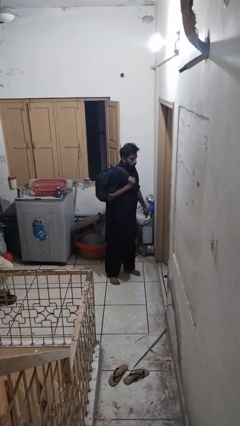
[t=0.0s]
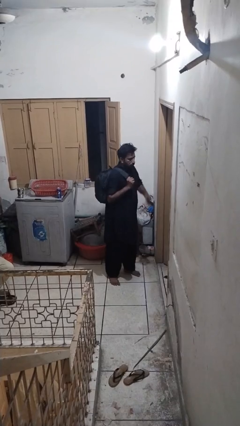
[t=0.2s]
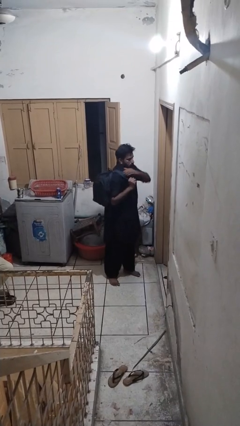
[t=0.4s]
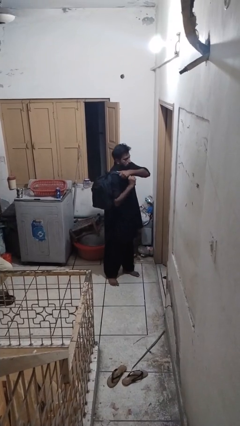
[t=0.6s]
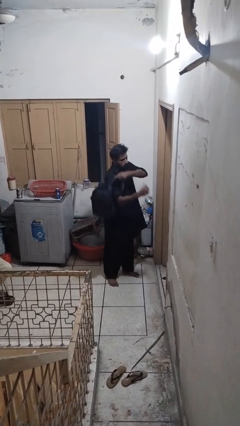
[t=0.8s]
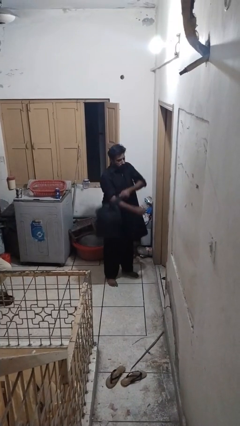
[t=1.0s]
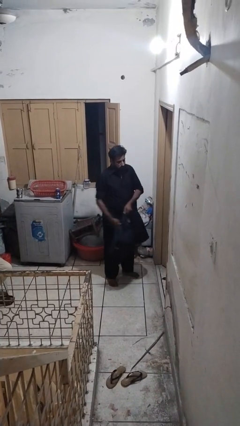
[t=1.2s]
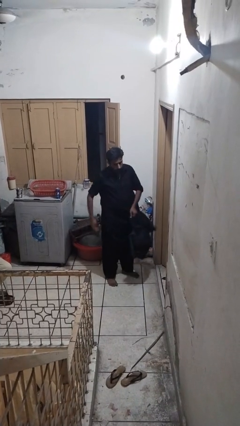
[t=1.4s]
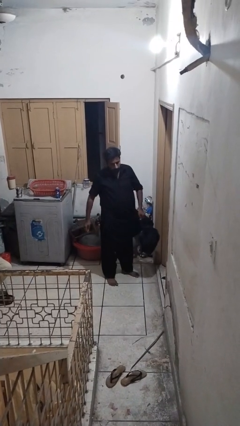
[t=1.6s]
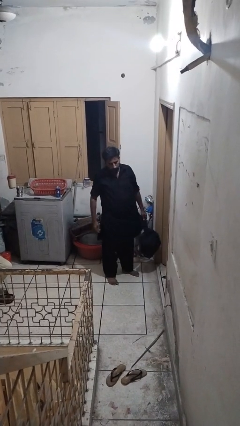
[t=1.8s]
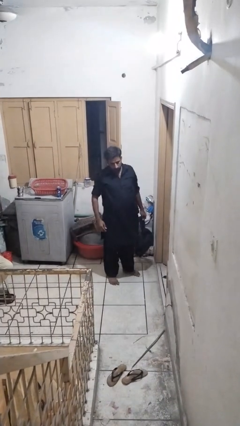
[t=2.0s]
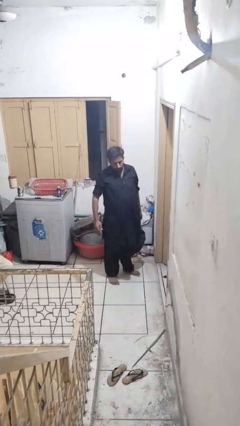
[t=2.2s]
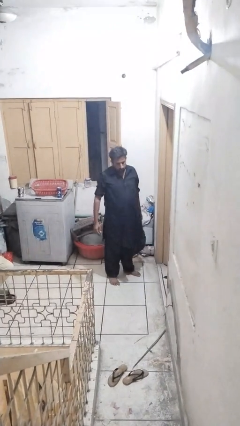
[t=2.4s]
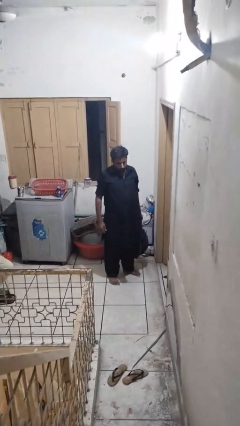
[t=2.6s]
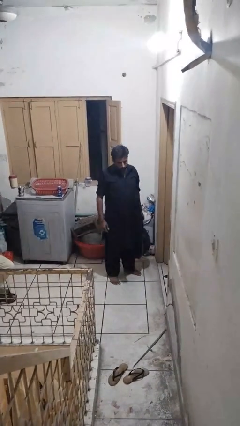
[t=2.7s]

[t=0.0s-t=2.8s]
person takes off backpack

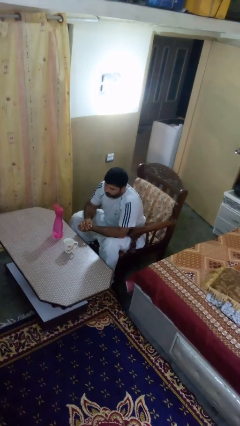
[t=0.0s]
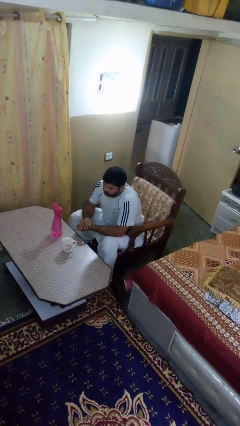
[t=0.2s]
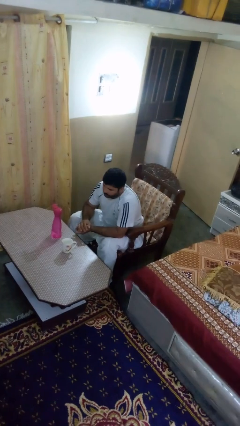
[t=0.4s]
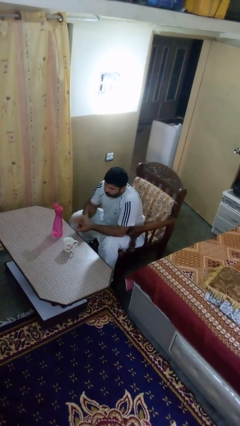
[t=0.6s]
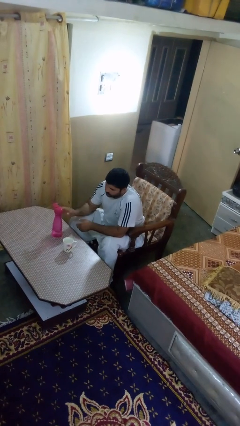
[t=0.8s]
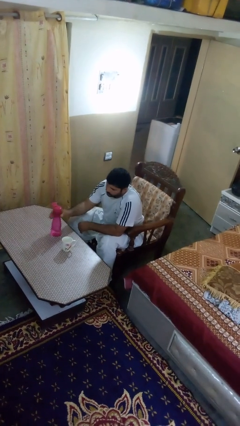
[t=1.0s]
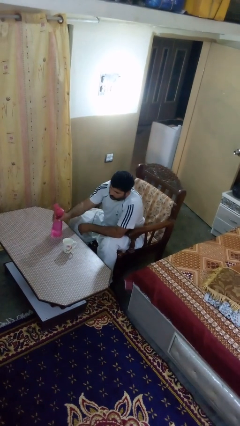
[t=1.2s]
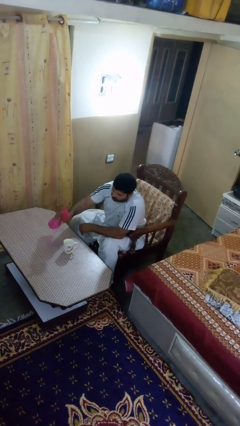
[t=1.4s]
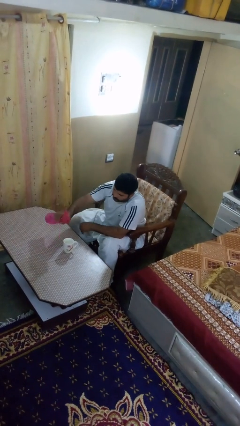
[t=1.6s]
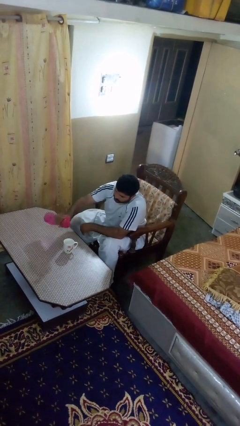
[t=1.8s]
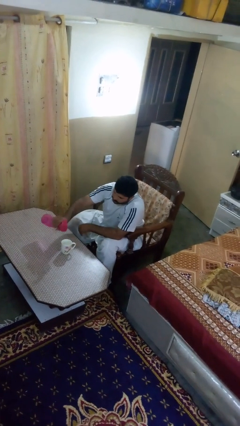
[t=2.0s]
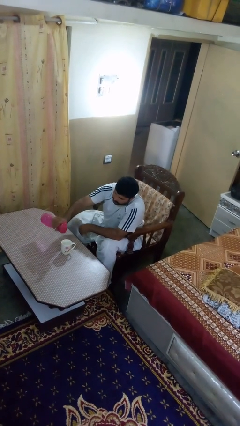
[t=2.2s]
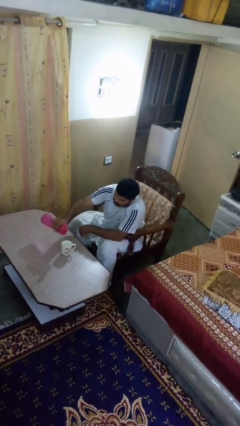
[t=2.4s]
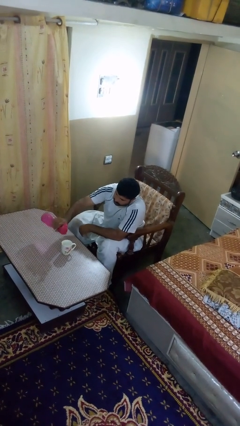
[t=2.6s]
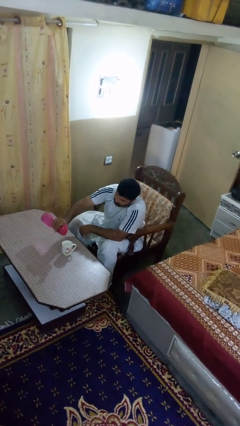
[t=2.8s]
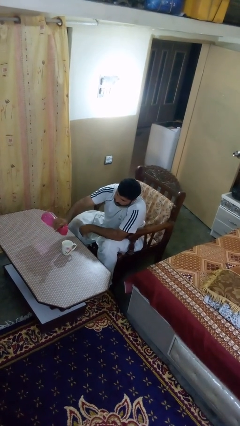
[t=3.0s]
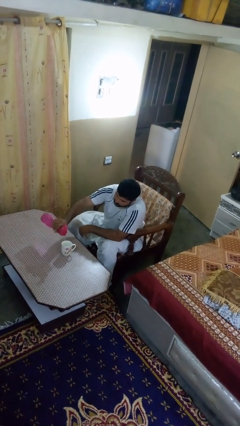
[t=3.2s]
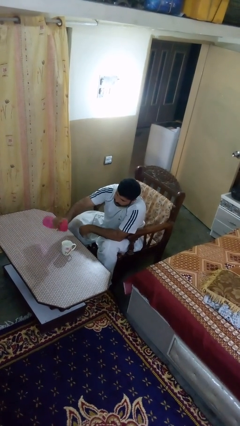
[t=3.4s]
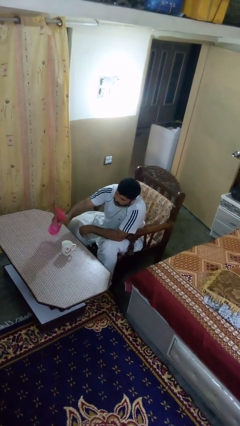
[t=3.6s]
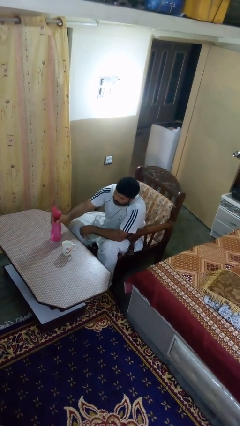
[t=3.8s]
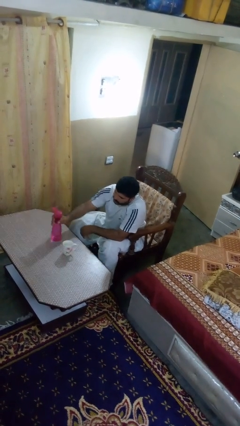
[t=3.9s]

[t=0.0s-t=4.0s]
person pours liquid into cup

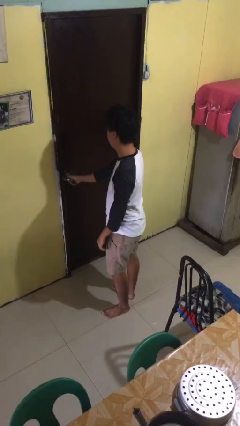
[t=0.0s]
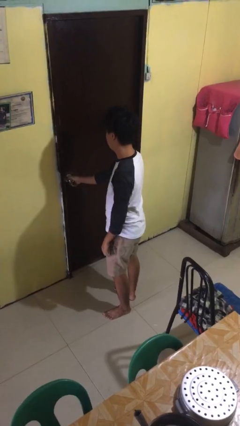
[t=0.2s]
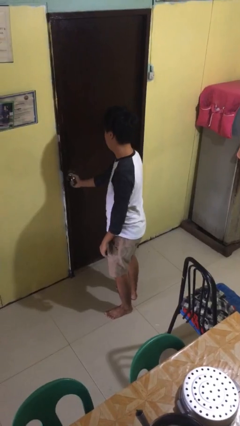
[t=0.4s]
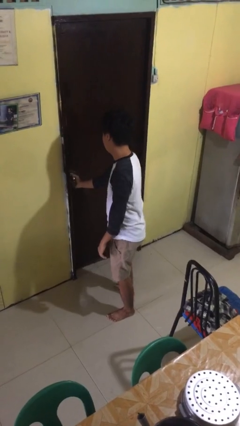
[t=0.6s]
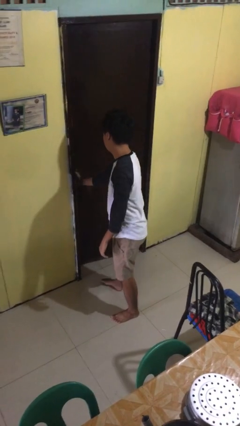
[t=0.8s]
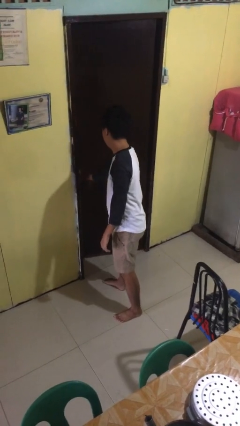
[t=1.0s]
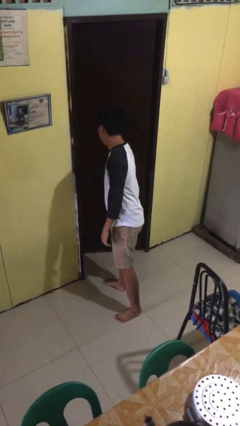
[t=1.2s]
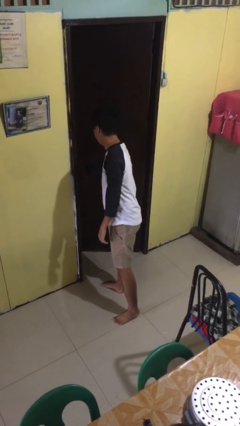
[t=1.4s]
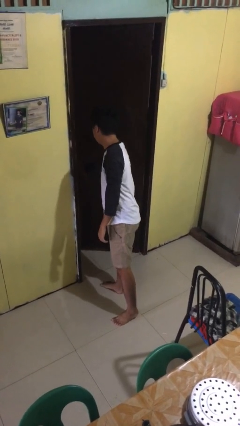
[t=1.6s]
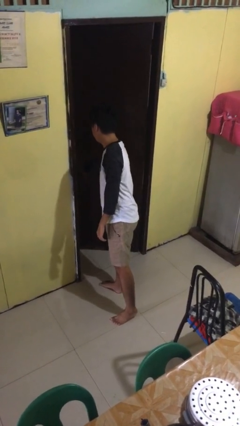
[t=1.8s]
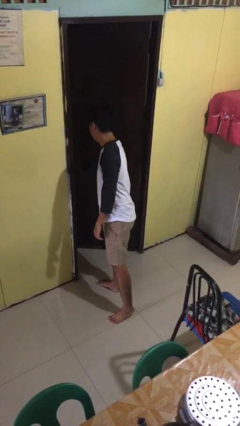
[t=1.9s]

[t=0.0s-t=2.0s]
person opens facility door

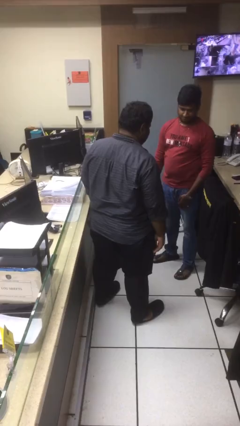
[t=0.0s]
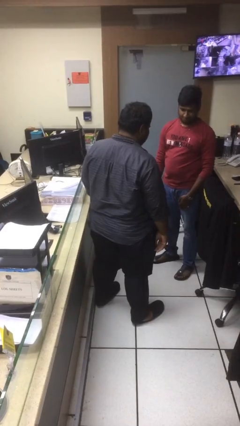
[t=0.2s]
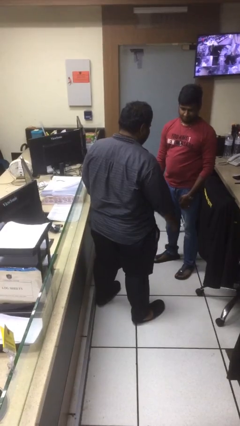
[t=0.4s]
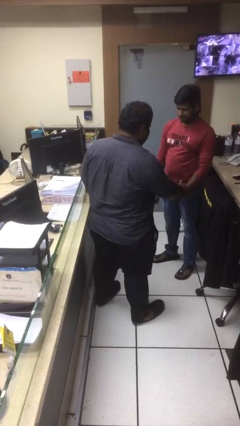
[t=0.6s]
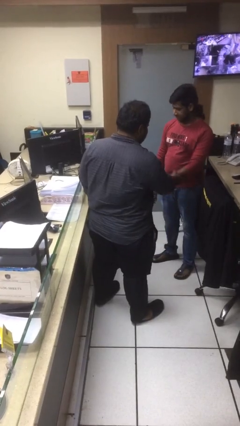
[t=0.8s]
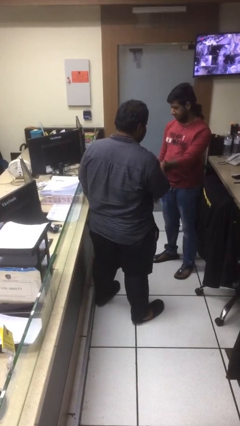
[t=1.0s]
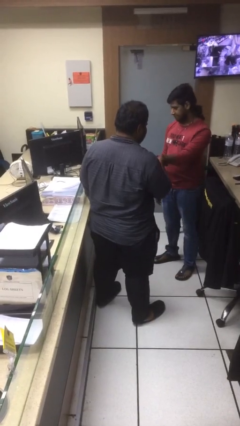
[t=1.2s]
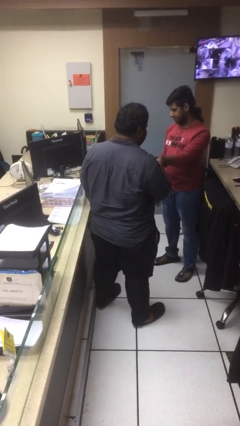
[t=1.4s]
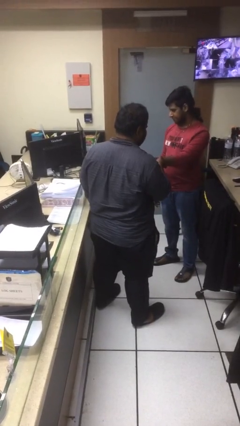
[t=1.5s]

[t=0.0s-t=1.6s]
person grabs person by forearm

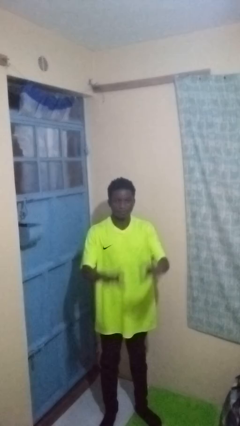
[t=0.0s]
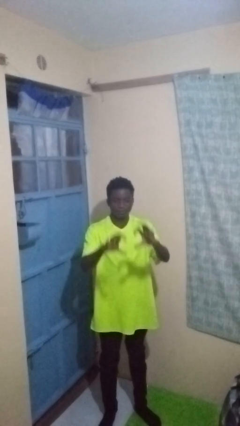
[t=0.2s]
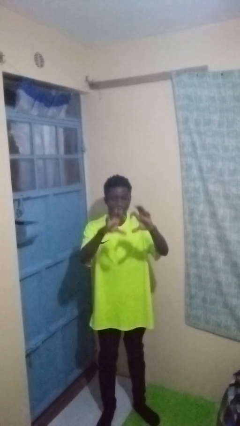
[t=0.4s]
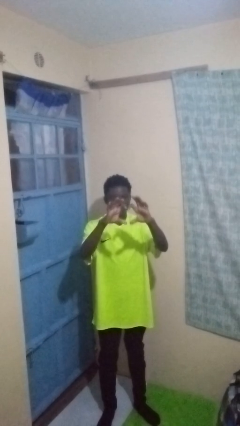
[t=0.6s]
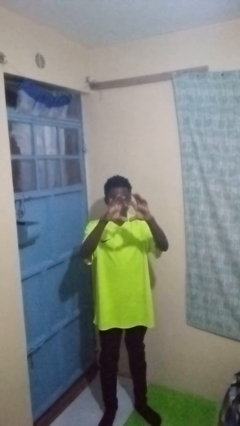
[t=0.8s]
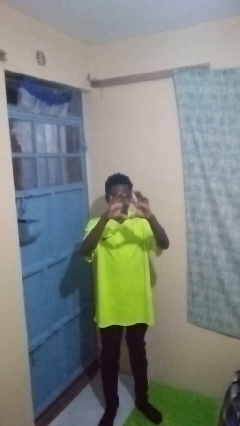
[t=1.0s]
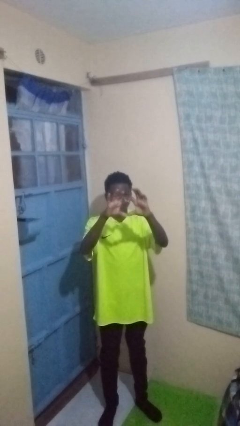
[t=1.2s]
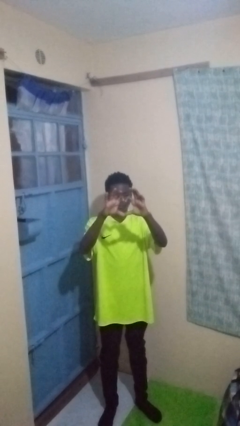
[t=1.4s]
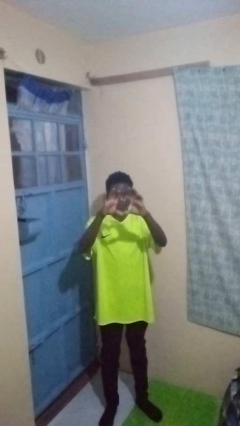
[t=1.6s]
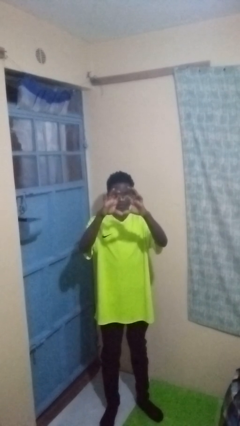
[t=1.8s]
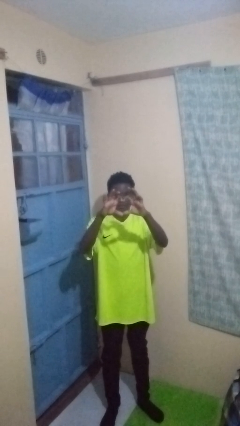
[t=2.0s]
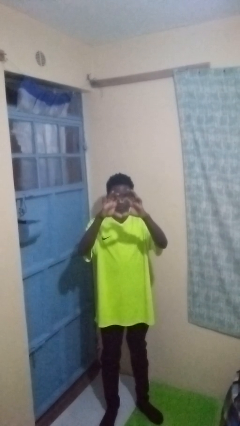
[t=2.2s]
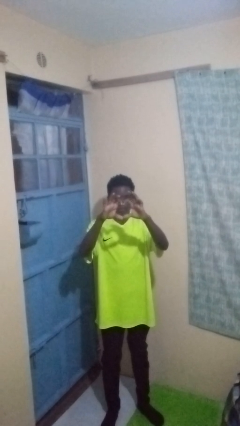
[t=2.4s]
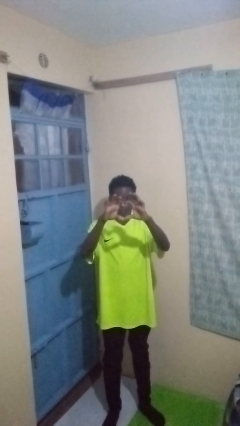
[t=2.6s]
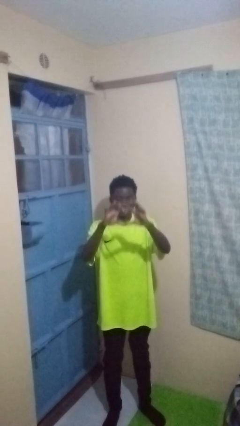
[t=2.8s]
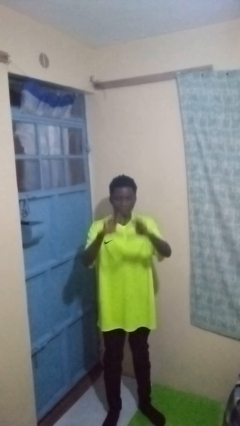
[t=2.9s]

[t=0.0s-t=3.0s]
person gestures heart

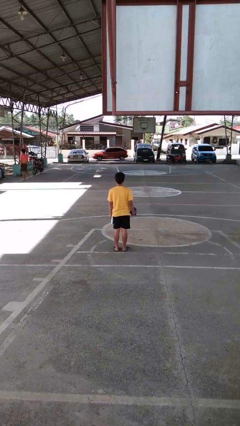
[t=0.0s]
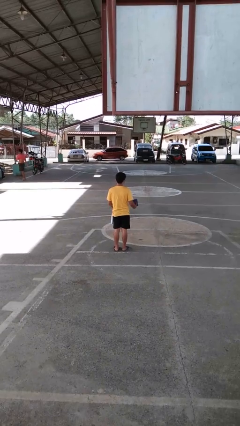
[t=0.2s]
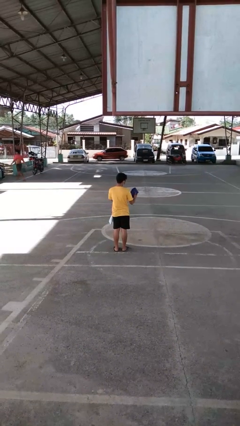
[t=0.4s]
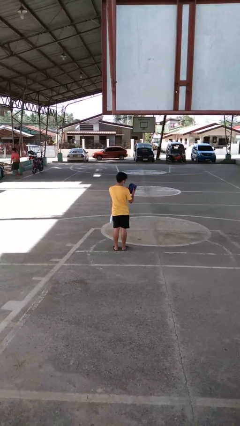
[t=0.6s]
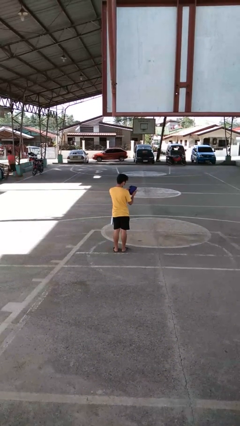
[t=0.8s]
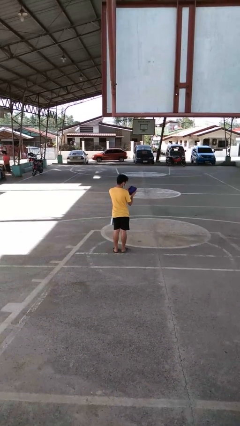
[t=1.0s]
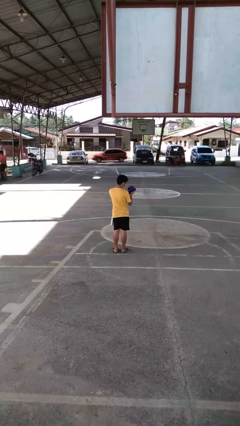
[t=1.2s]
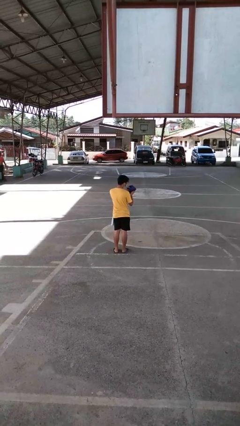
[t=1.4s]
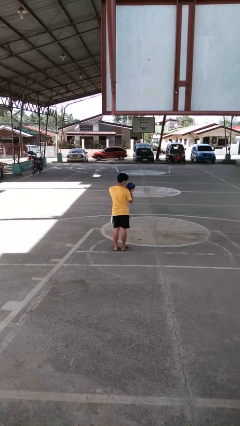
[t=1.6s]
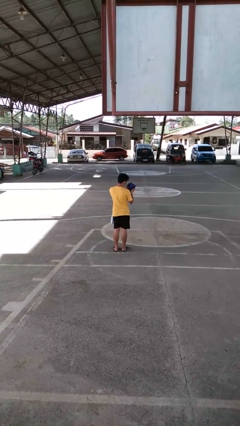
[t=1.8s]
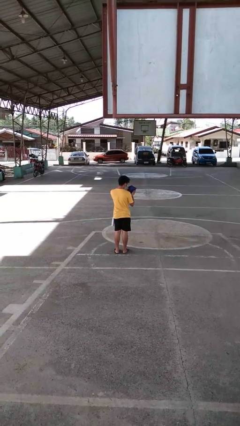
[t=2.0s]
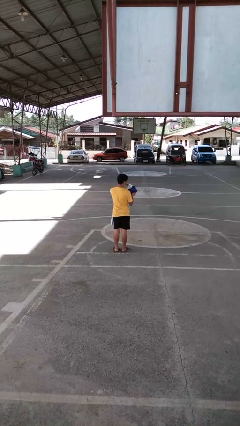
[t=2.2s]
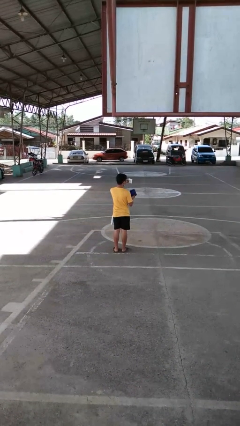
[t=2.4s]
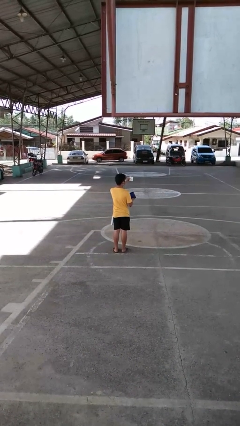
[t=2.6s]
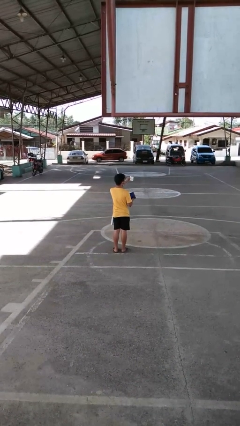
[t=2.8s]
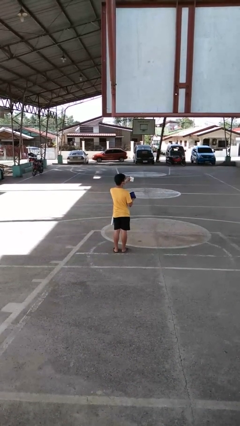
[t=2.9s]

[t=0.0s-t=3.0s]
person puts on glasses

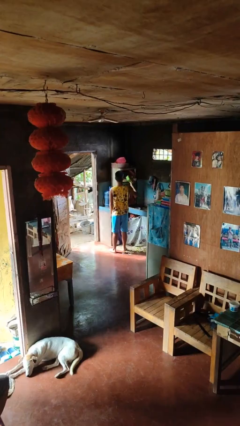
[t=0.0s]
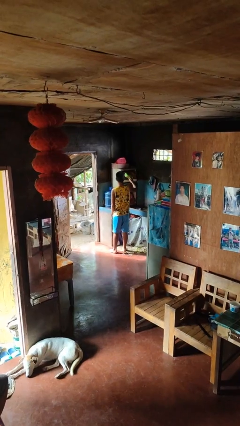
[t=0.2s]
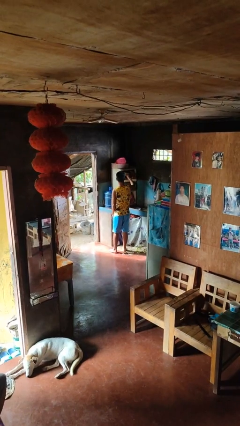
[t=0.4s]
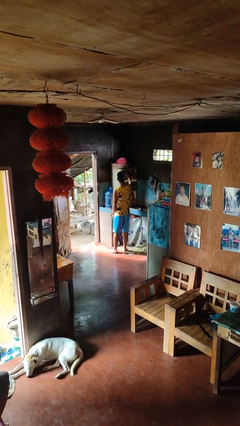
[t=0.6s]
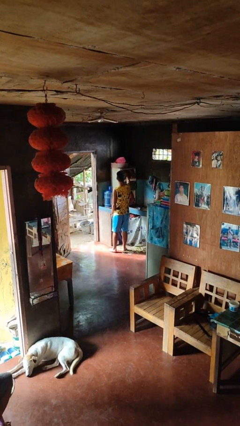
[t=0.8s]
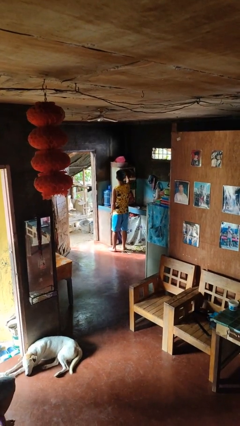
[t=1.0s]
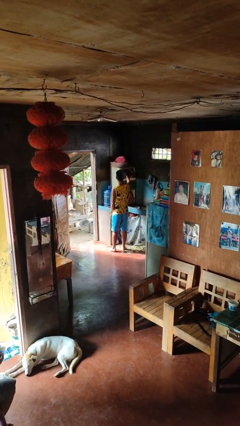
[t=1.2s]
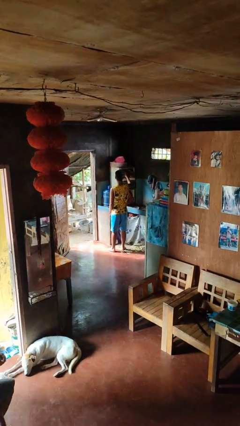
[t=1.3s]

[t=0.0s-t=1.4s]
person puts object in cabinet
